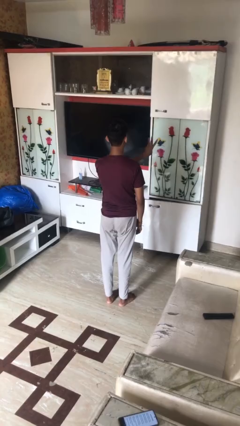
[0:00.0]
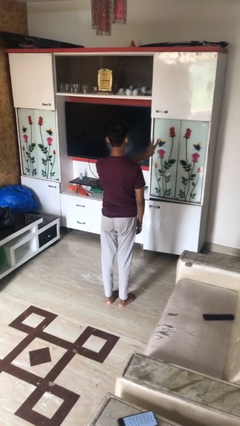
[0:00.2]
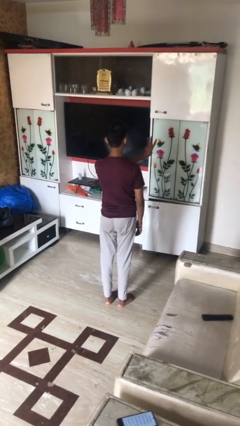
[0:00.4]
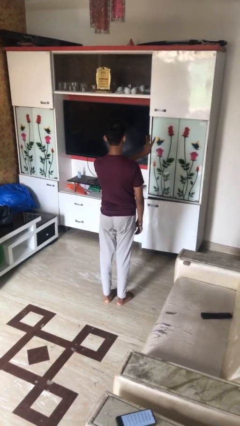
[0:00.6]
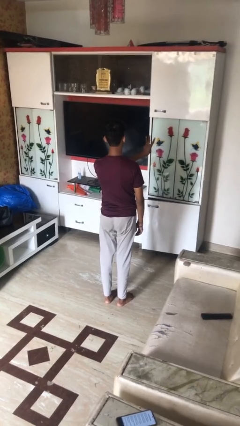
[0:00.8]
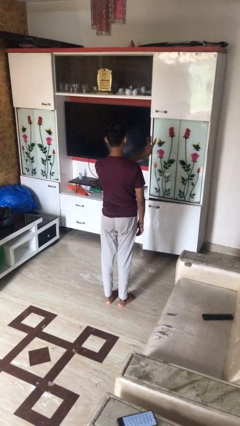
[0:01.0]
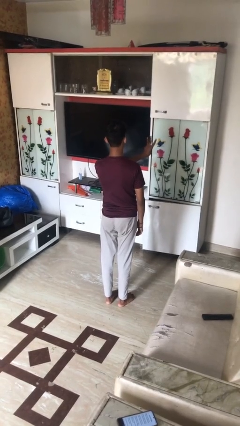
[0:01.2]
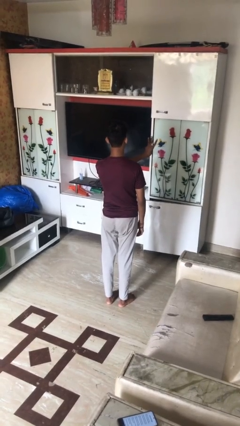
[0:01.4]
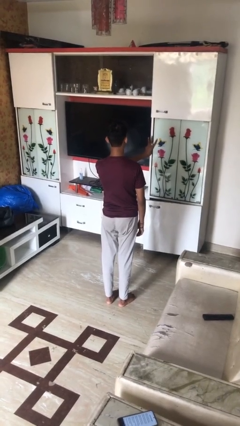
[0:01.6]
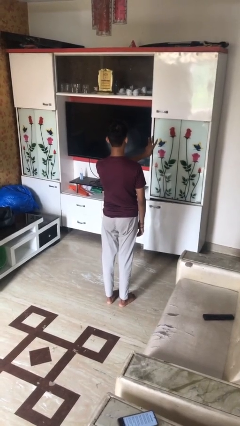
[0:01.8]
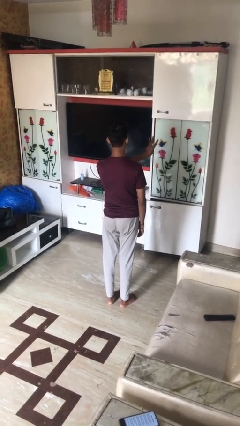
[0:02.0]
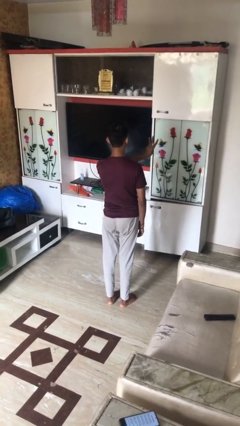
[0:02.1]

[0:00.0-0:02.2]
person gestures number three

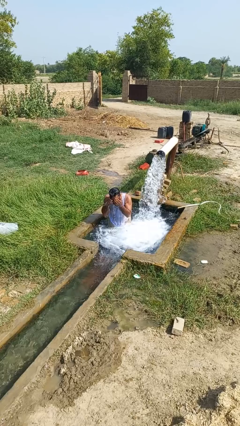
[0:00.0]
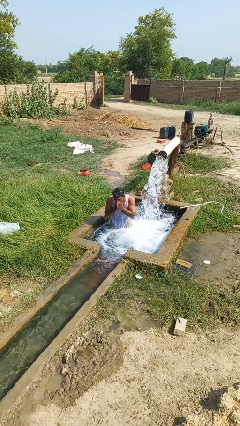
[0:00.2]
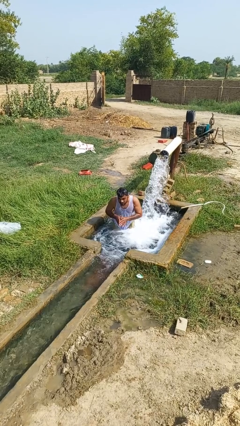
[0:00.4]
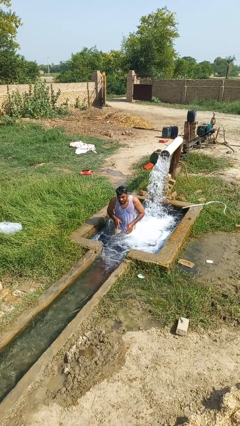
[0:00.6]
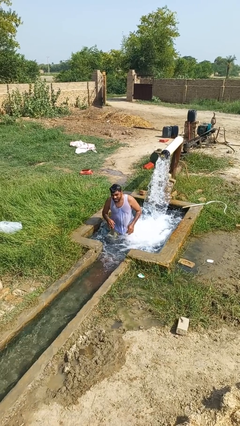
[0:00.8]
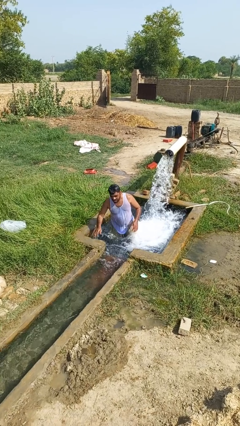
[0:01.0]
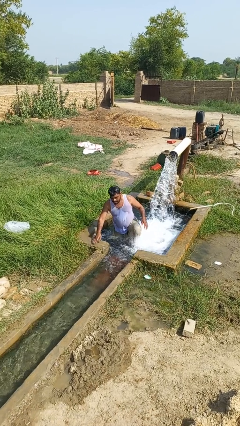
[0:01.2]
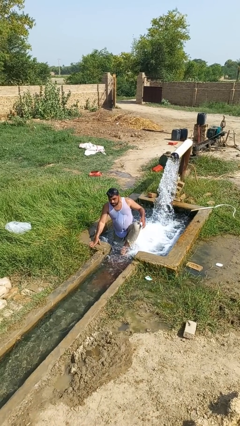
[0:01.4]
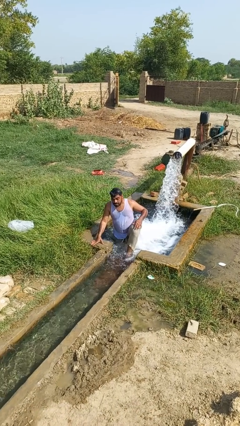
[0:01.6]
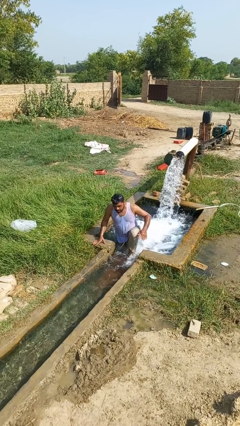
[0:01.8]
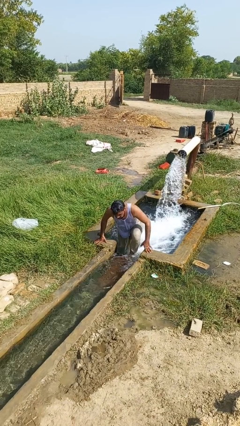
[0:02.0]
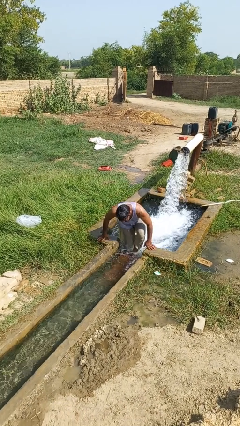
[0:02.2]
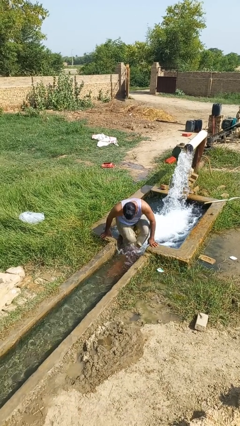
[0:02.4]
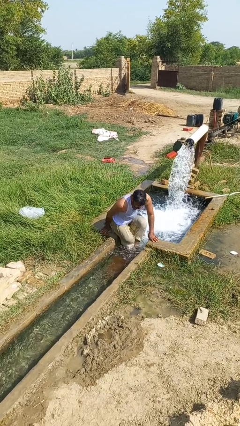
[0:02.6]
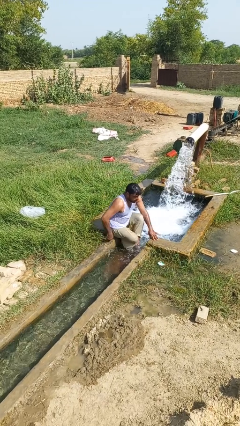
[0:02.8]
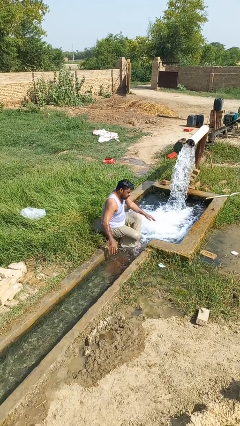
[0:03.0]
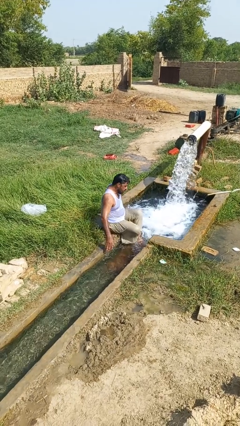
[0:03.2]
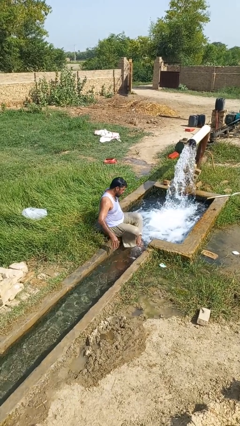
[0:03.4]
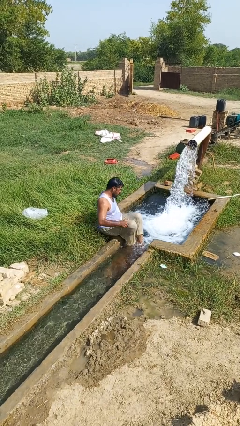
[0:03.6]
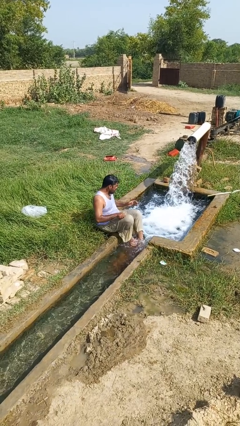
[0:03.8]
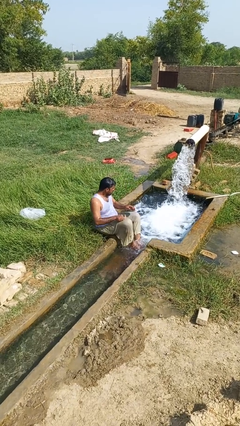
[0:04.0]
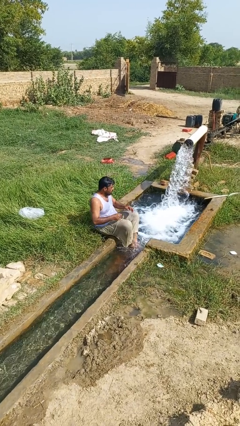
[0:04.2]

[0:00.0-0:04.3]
person exits pool

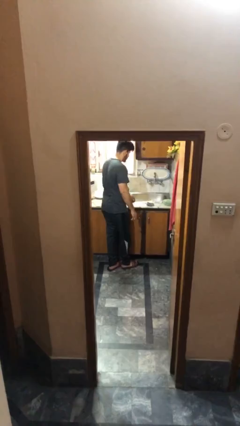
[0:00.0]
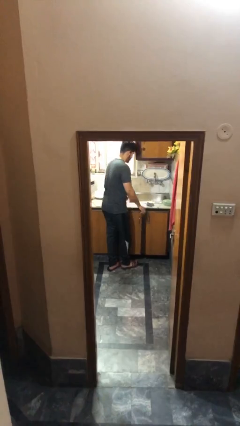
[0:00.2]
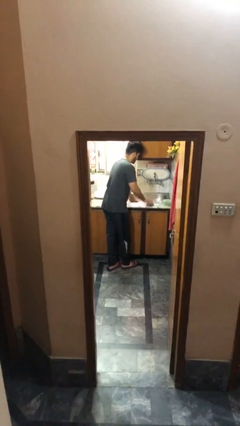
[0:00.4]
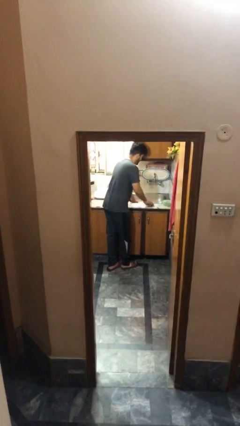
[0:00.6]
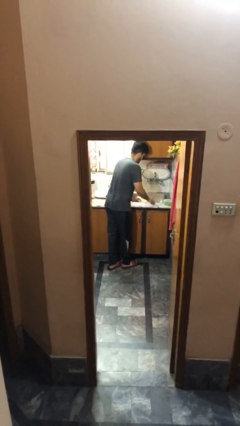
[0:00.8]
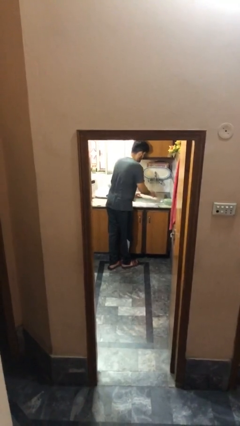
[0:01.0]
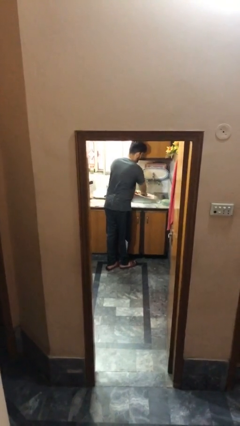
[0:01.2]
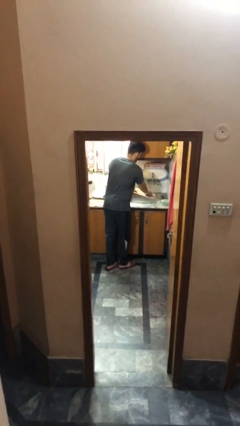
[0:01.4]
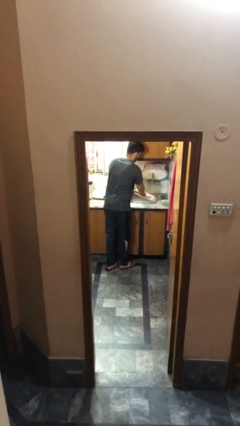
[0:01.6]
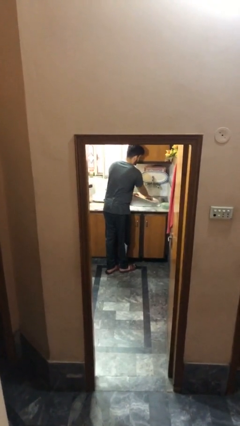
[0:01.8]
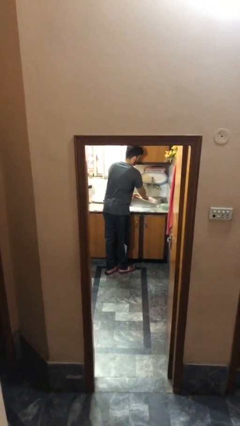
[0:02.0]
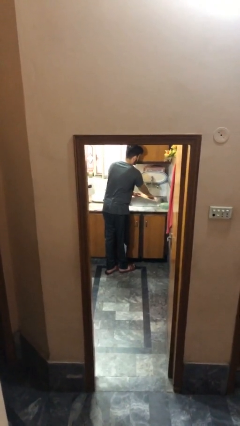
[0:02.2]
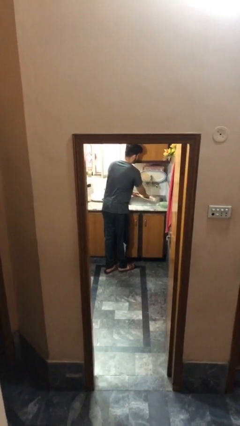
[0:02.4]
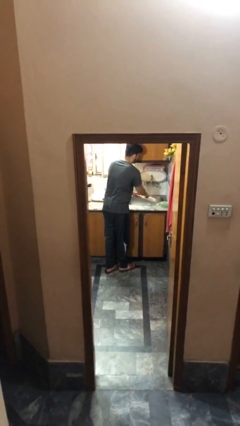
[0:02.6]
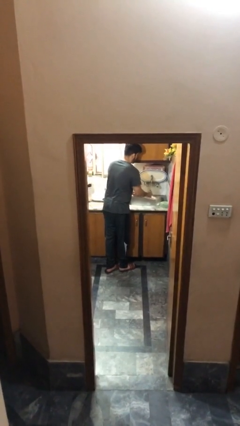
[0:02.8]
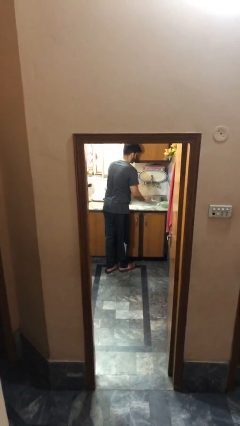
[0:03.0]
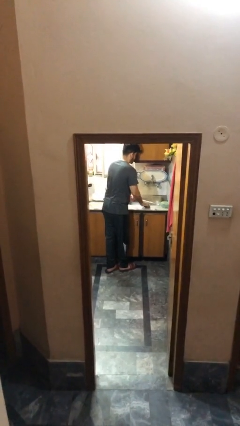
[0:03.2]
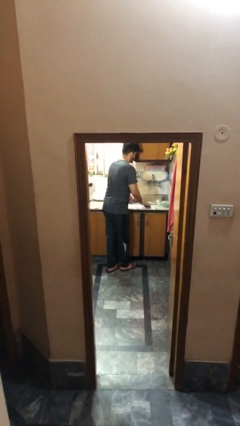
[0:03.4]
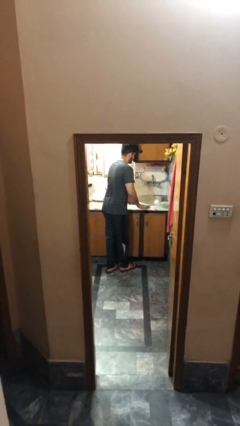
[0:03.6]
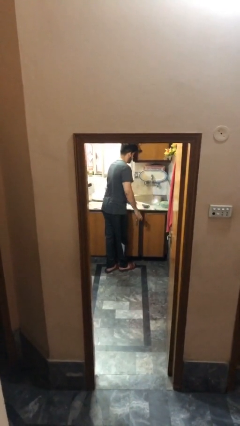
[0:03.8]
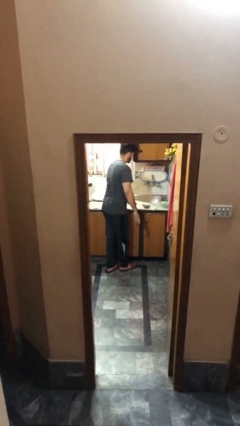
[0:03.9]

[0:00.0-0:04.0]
person washes dish

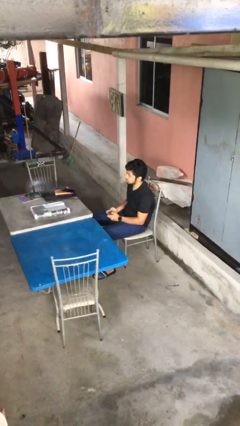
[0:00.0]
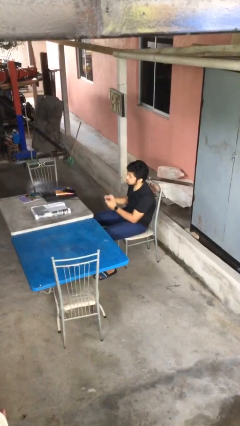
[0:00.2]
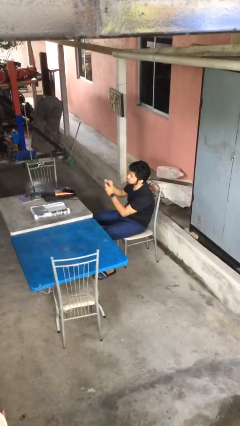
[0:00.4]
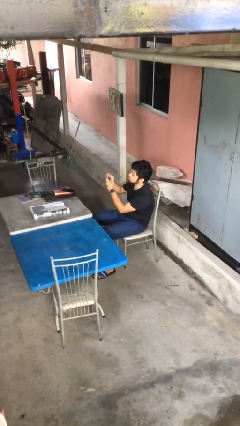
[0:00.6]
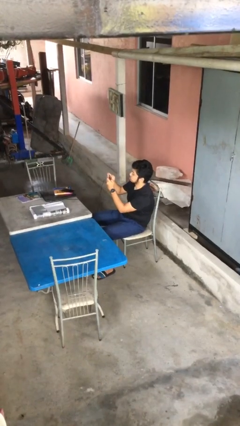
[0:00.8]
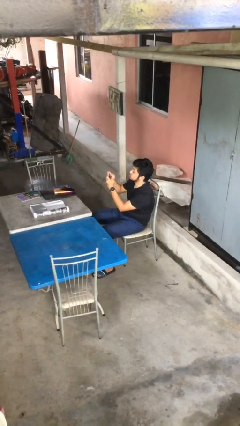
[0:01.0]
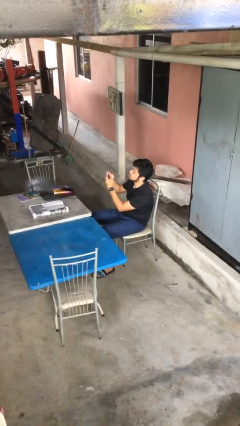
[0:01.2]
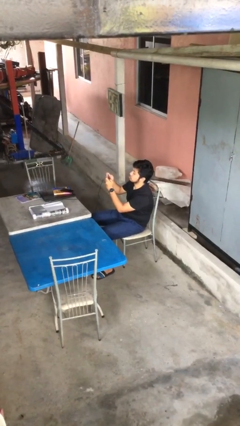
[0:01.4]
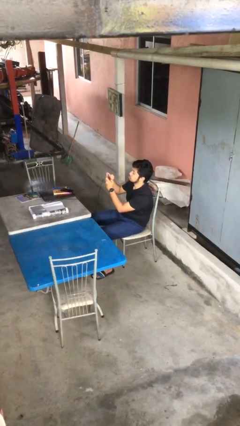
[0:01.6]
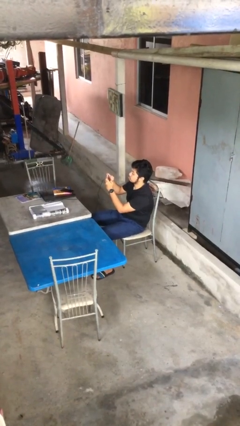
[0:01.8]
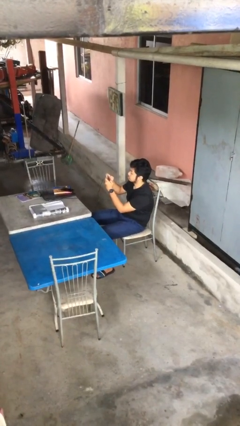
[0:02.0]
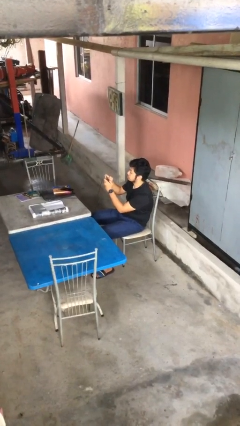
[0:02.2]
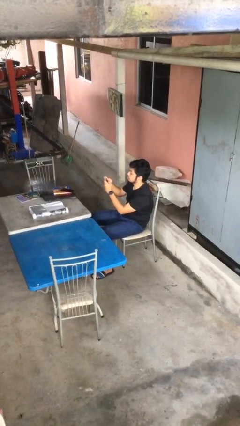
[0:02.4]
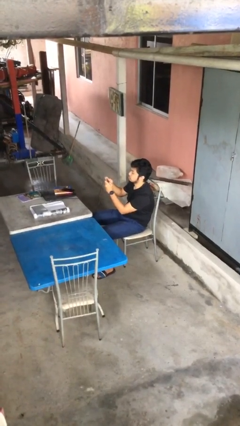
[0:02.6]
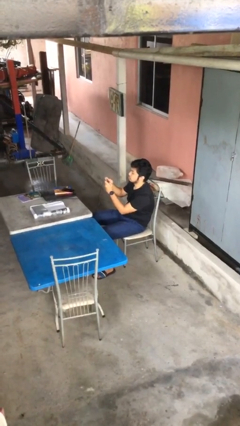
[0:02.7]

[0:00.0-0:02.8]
person interacts with handheld game

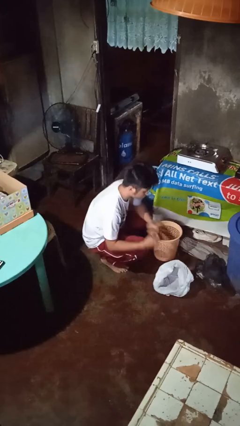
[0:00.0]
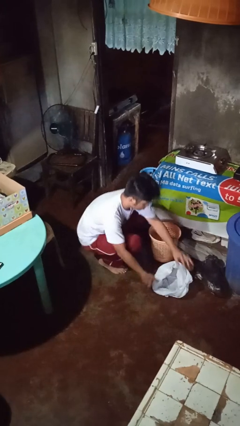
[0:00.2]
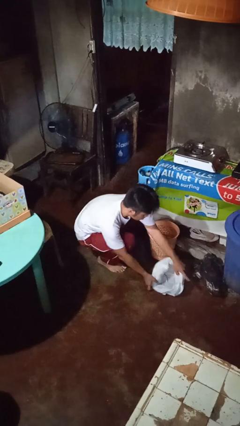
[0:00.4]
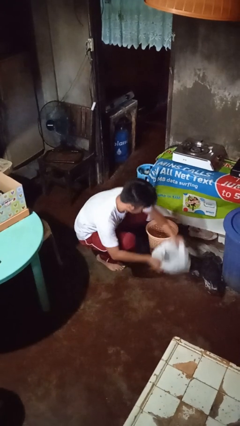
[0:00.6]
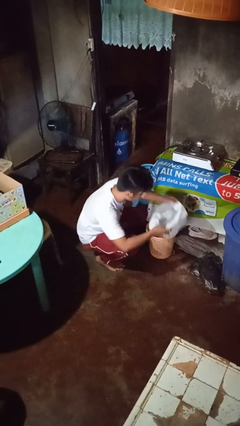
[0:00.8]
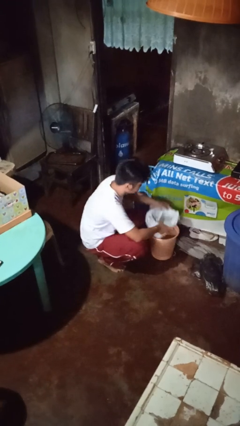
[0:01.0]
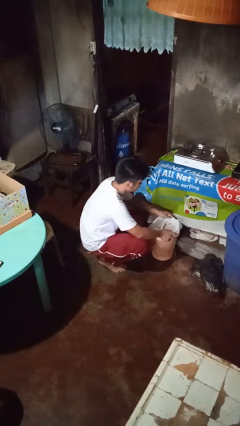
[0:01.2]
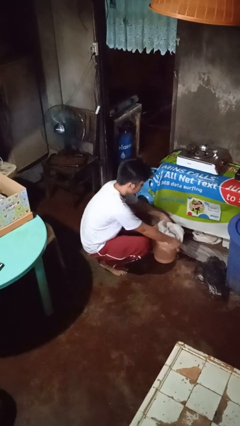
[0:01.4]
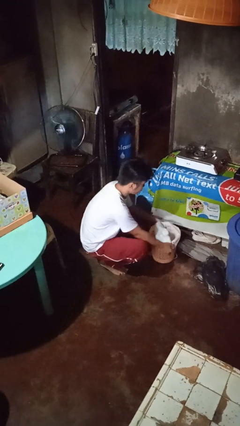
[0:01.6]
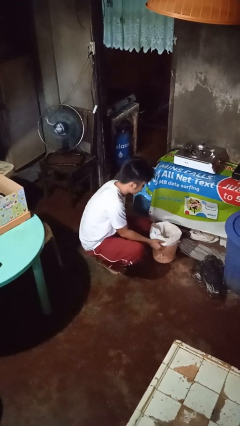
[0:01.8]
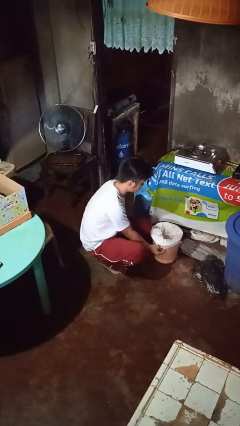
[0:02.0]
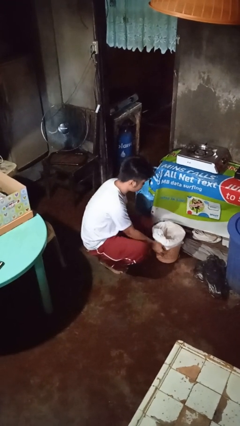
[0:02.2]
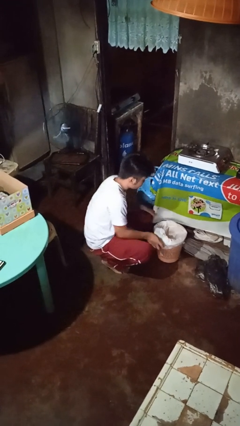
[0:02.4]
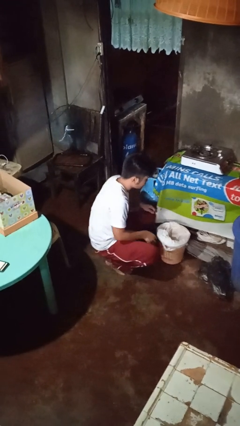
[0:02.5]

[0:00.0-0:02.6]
person inserts trashbag into trashcan

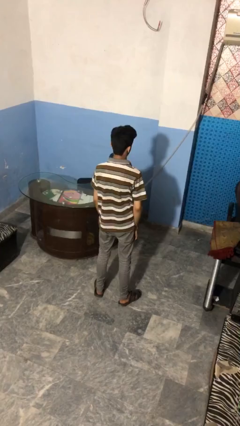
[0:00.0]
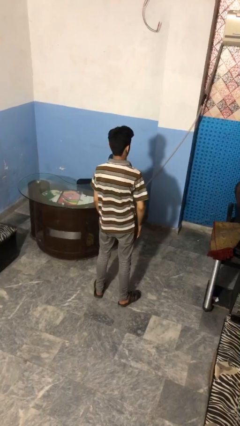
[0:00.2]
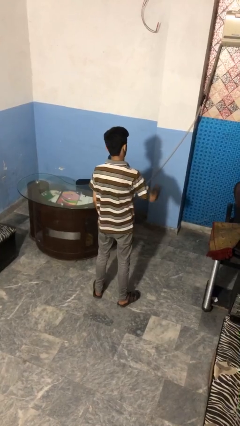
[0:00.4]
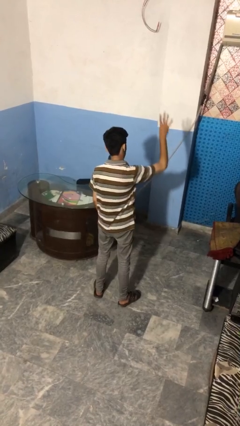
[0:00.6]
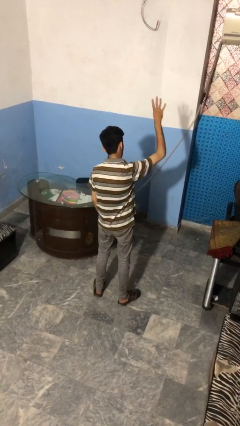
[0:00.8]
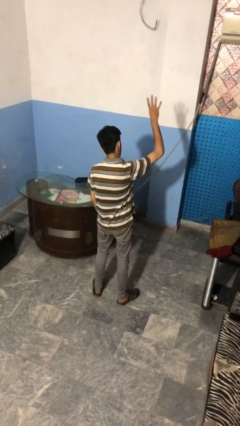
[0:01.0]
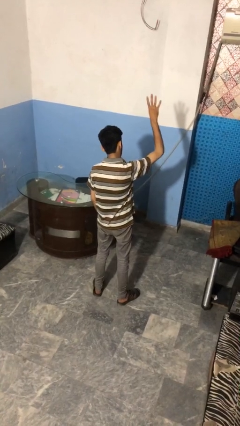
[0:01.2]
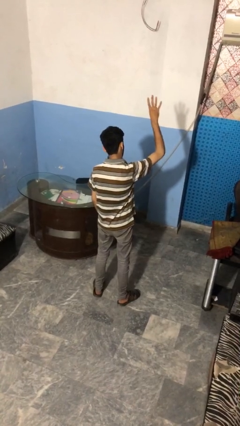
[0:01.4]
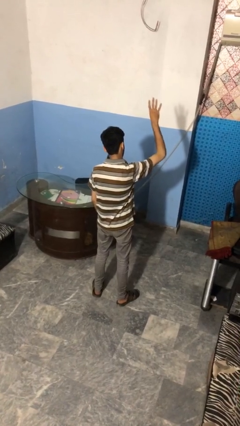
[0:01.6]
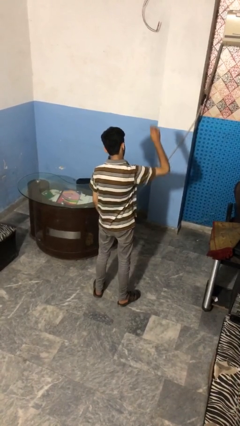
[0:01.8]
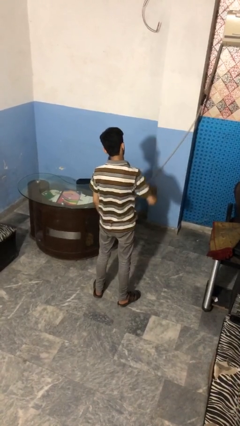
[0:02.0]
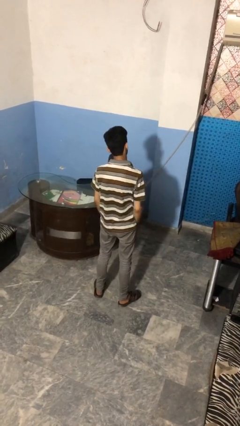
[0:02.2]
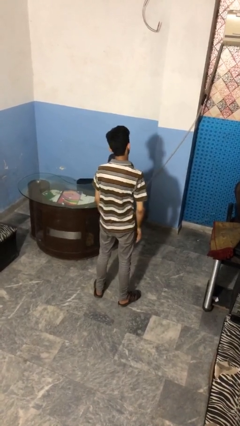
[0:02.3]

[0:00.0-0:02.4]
person gestures number four
